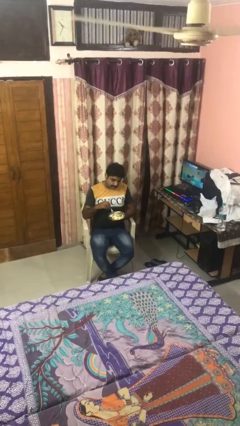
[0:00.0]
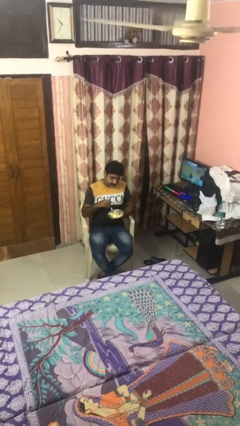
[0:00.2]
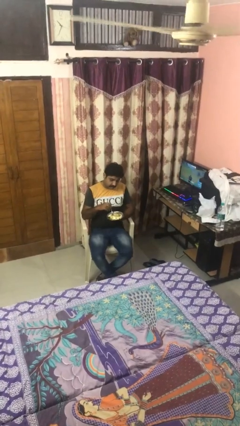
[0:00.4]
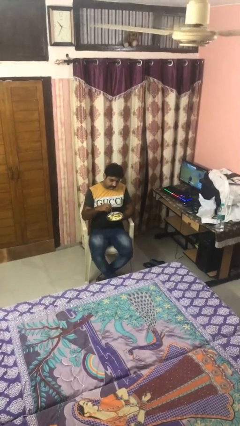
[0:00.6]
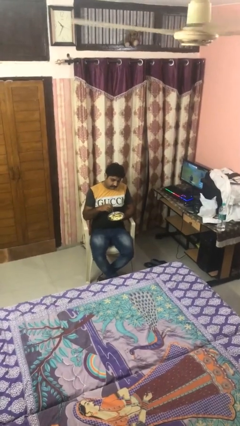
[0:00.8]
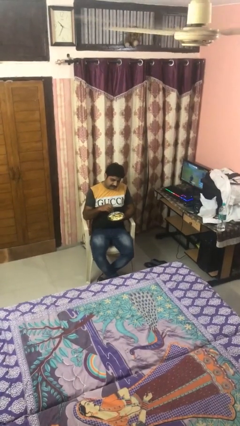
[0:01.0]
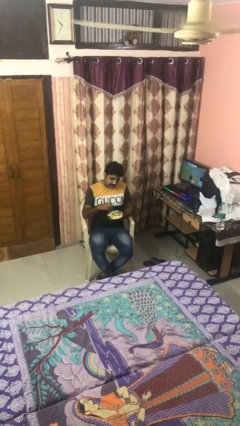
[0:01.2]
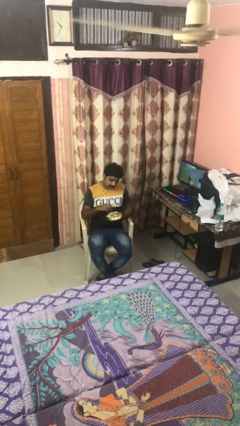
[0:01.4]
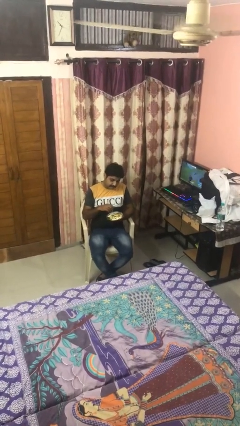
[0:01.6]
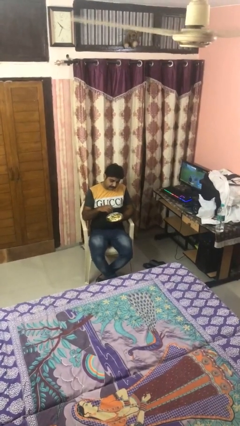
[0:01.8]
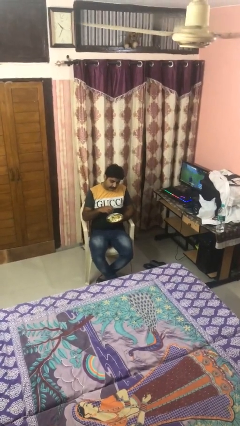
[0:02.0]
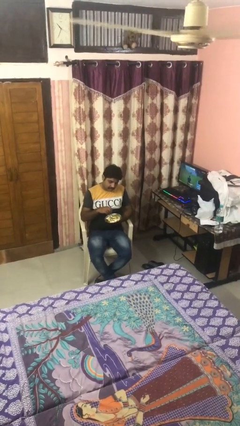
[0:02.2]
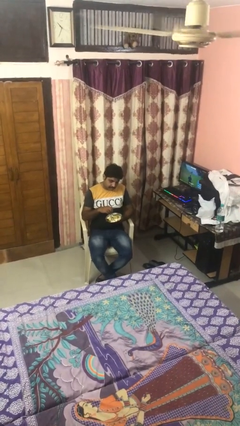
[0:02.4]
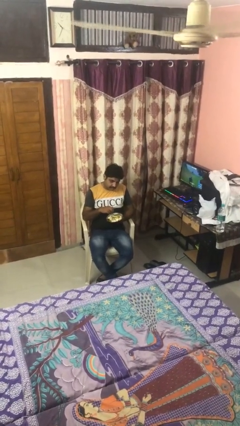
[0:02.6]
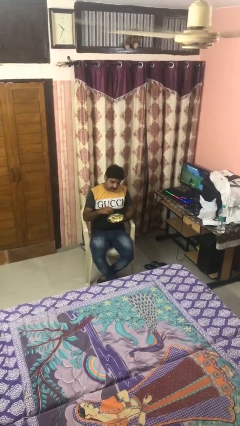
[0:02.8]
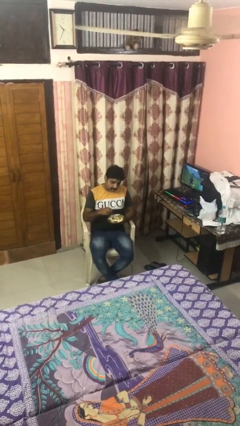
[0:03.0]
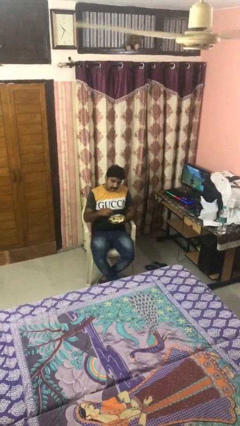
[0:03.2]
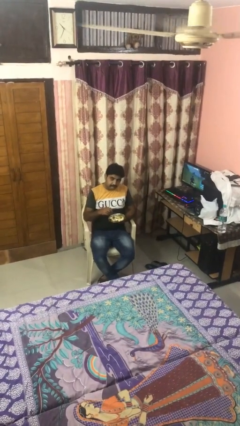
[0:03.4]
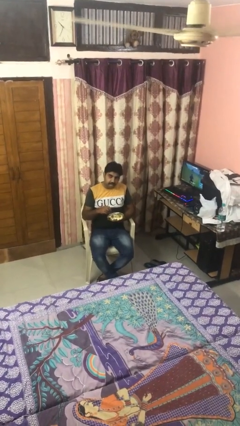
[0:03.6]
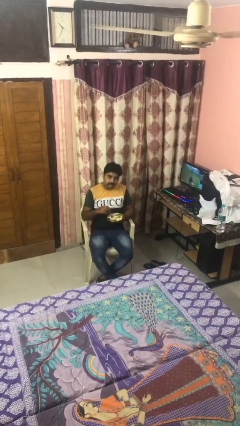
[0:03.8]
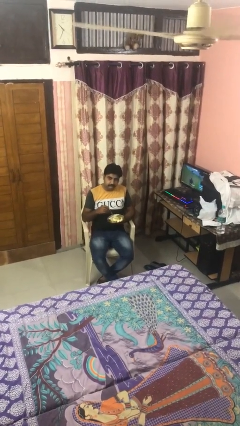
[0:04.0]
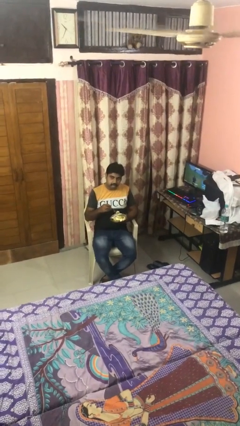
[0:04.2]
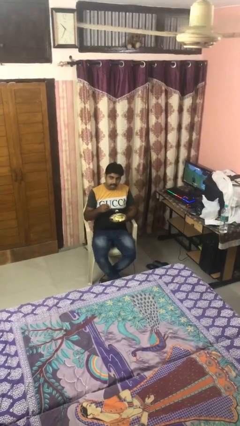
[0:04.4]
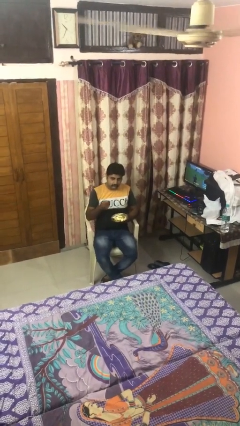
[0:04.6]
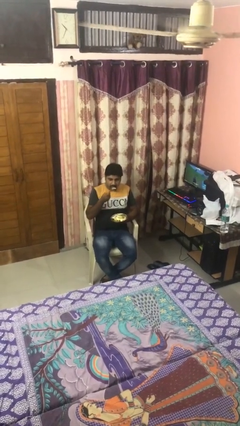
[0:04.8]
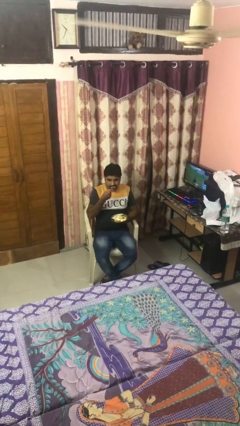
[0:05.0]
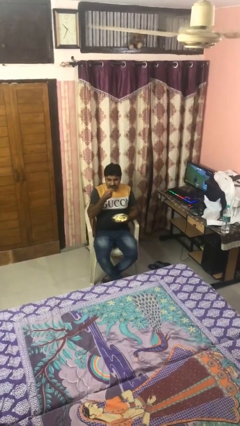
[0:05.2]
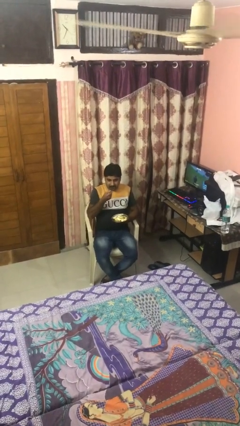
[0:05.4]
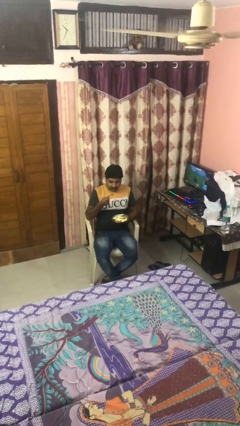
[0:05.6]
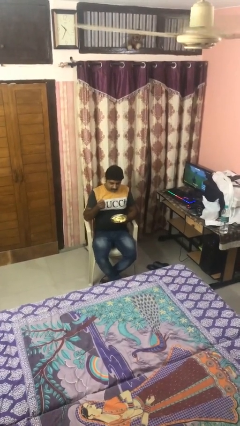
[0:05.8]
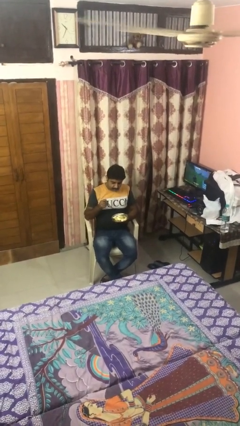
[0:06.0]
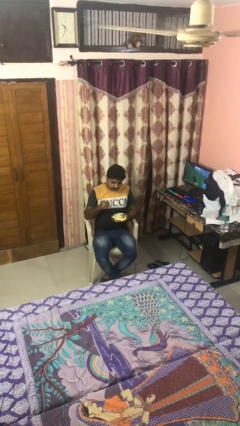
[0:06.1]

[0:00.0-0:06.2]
person eats with utensil

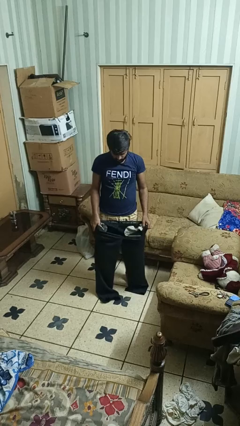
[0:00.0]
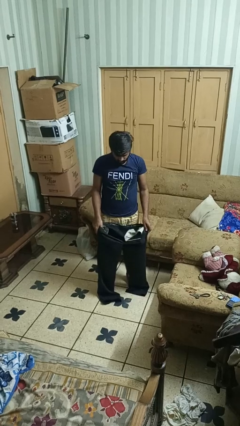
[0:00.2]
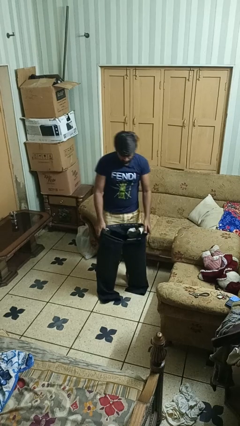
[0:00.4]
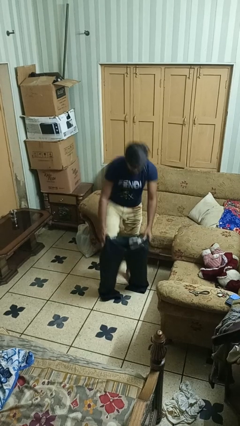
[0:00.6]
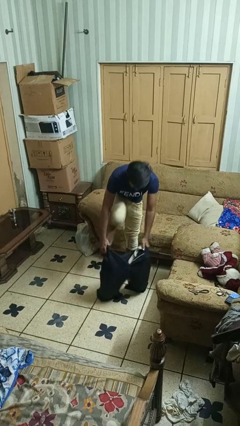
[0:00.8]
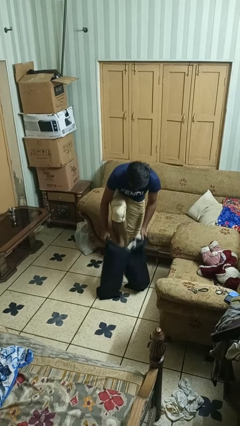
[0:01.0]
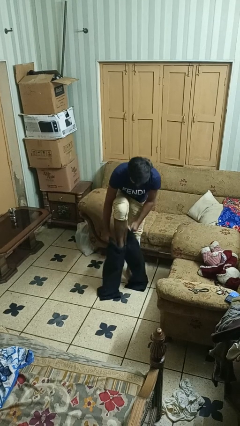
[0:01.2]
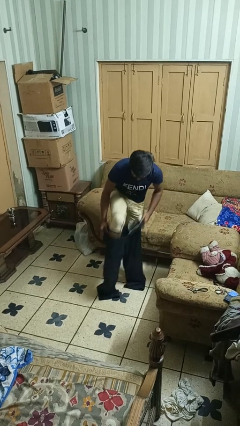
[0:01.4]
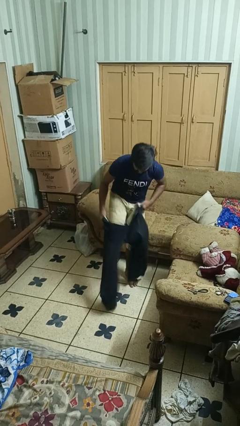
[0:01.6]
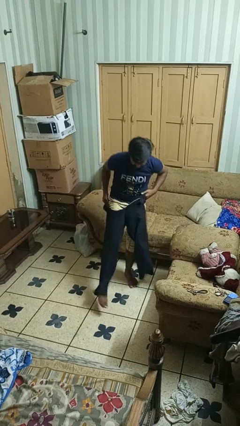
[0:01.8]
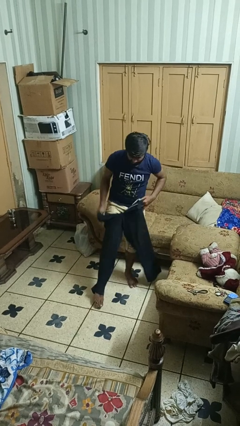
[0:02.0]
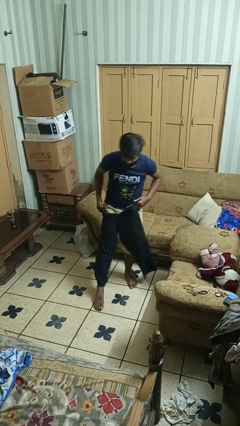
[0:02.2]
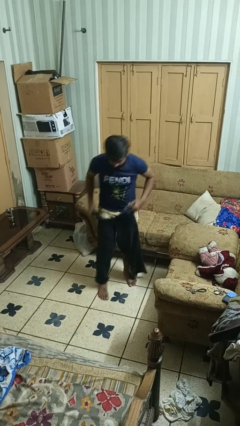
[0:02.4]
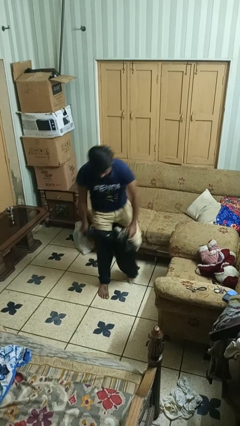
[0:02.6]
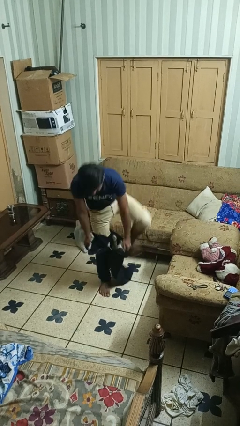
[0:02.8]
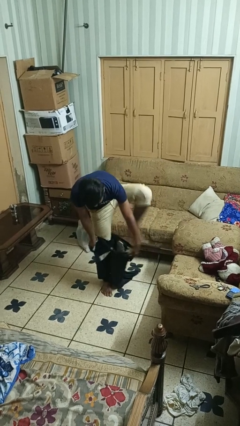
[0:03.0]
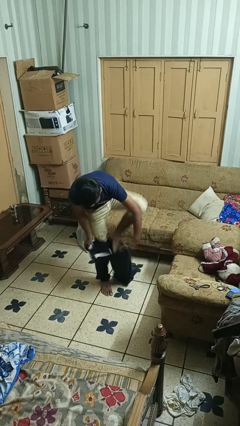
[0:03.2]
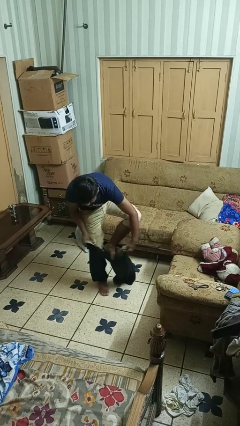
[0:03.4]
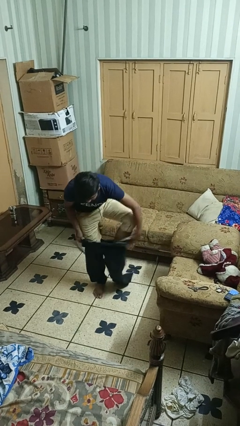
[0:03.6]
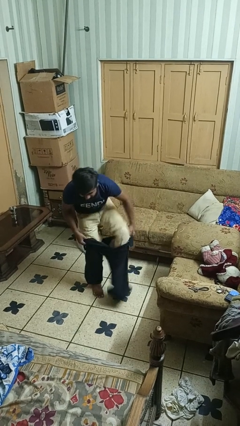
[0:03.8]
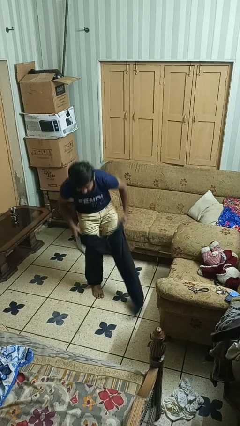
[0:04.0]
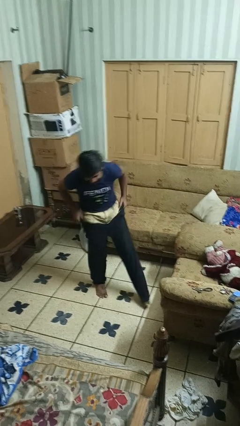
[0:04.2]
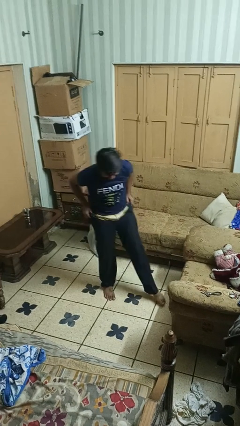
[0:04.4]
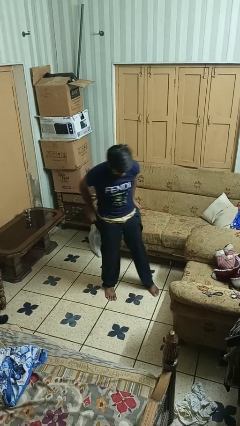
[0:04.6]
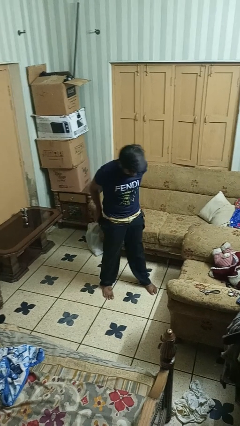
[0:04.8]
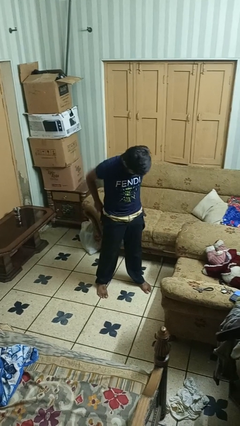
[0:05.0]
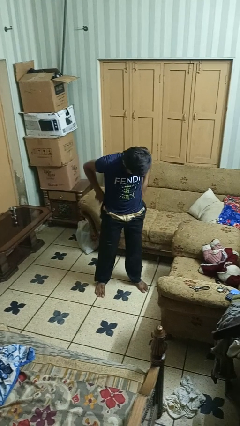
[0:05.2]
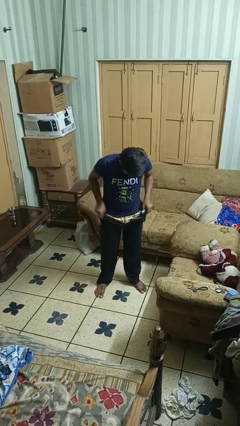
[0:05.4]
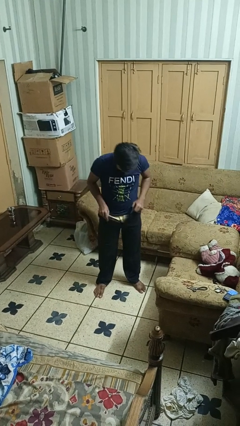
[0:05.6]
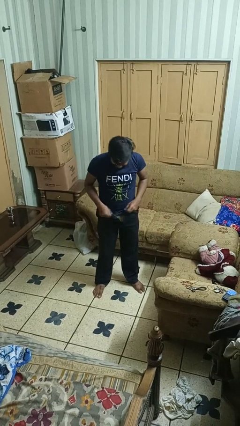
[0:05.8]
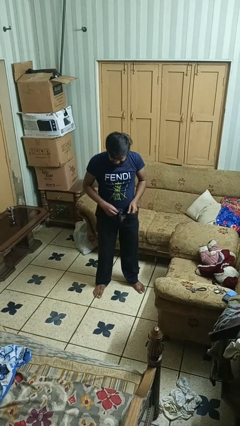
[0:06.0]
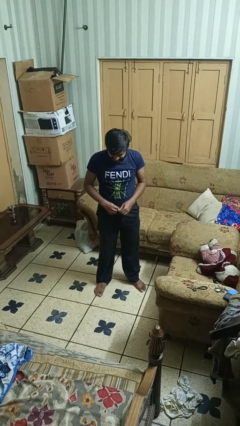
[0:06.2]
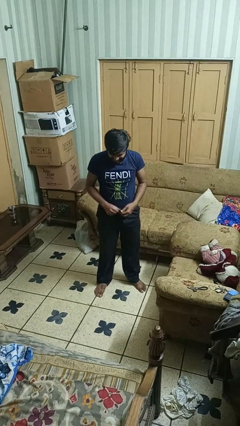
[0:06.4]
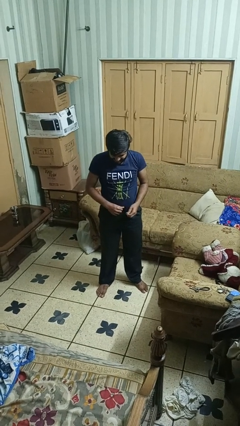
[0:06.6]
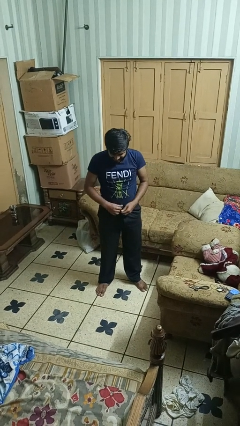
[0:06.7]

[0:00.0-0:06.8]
person puts on pants

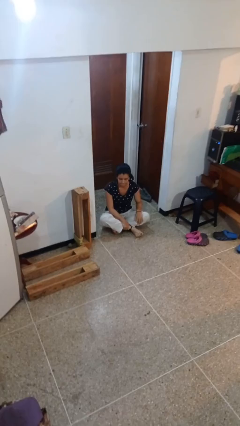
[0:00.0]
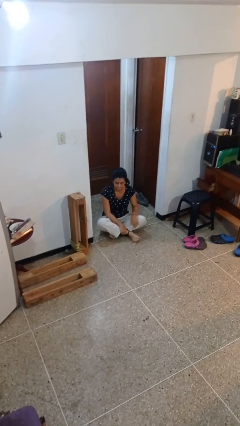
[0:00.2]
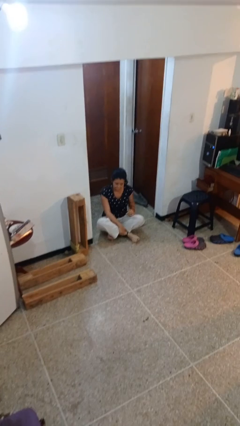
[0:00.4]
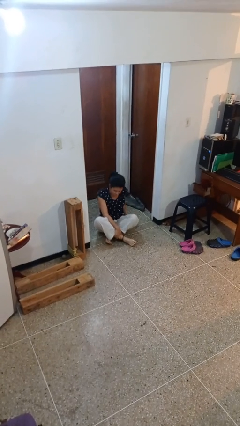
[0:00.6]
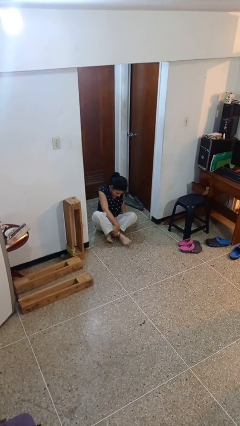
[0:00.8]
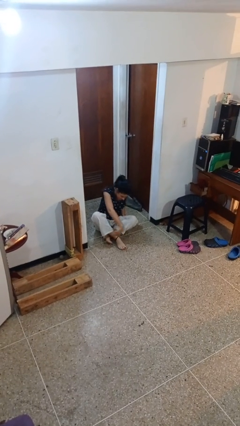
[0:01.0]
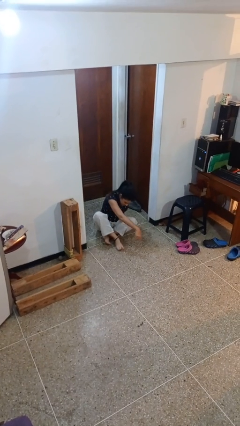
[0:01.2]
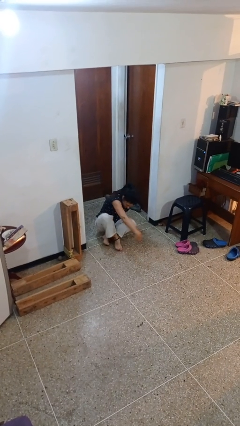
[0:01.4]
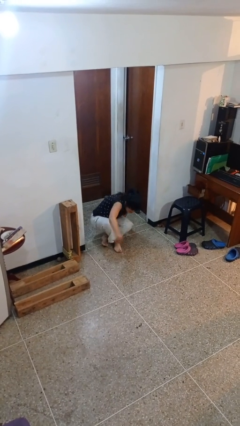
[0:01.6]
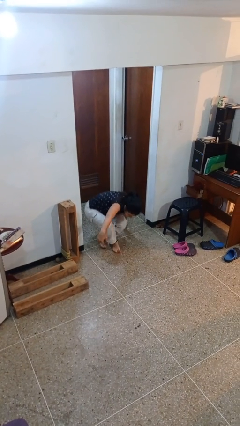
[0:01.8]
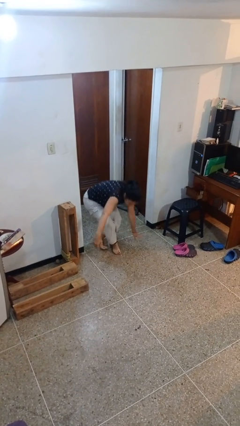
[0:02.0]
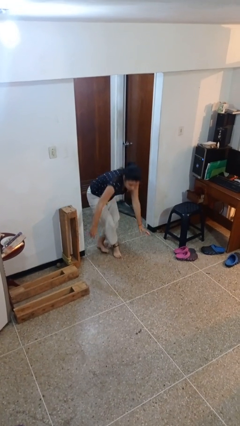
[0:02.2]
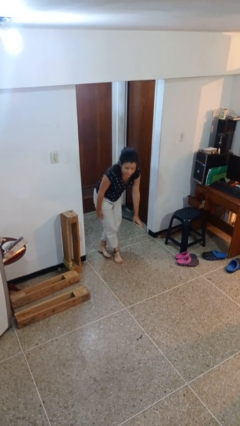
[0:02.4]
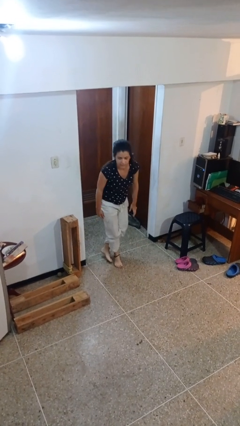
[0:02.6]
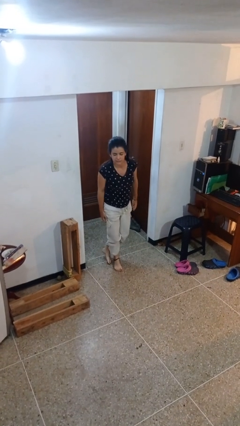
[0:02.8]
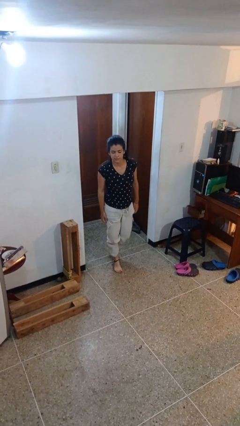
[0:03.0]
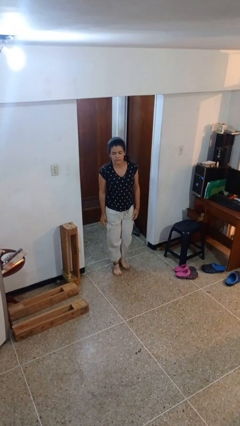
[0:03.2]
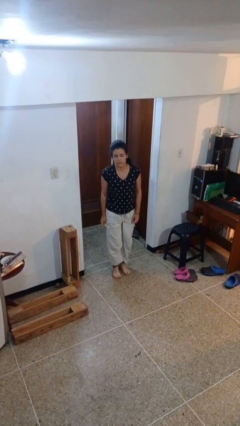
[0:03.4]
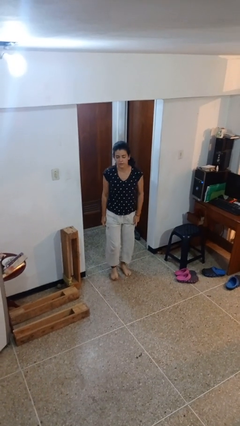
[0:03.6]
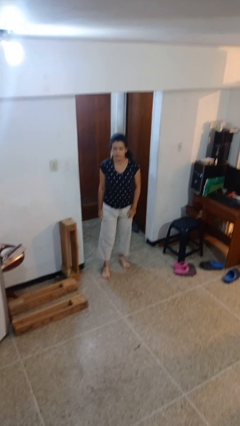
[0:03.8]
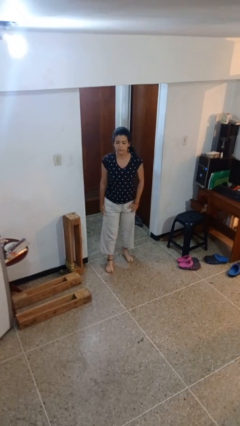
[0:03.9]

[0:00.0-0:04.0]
person stands up from floor

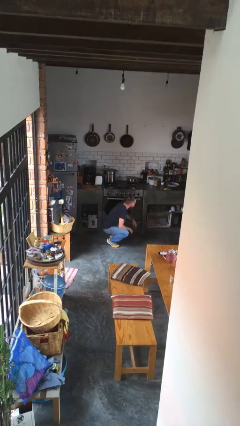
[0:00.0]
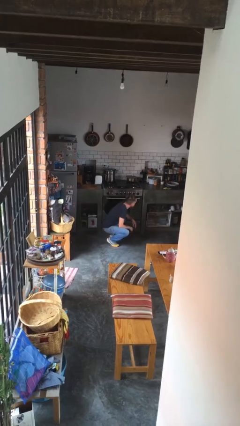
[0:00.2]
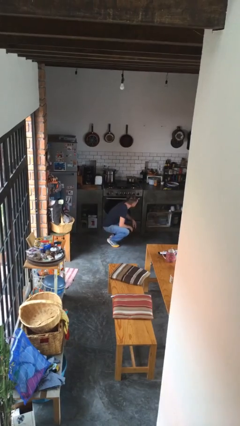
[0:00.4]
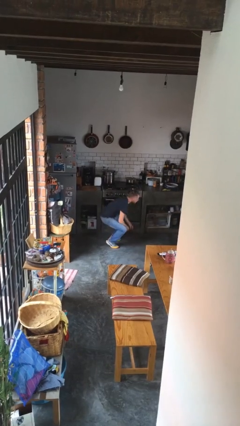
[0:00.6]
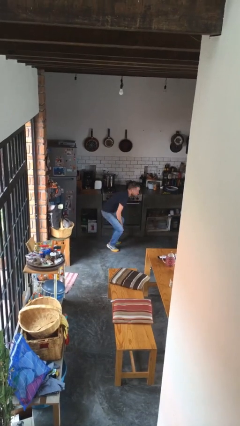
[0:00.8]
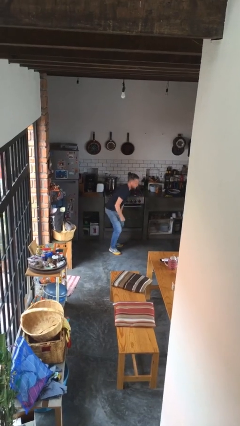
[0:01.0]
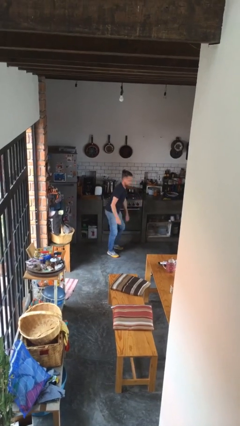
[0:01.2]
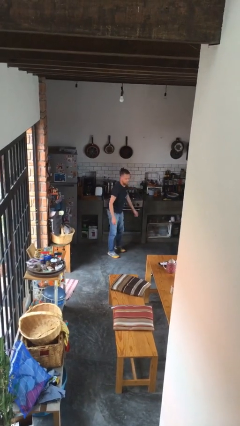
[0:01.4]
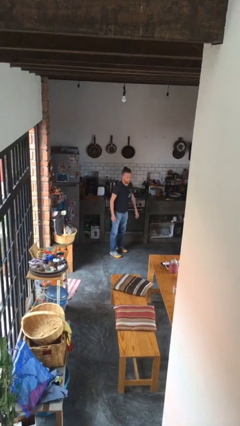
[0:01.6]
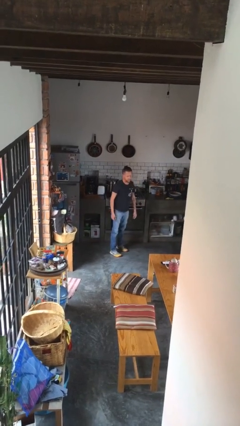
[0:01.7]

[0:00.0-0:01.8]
person stands up
